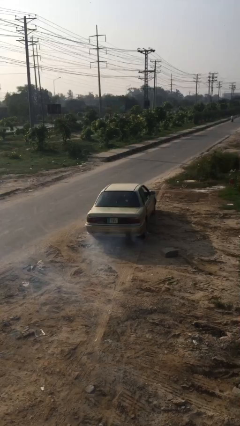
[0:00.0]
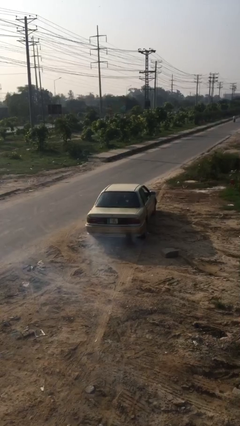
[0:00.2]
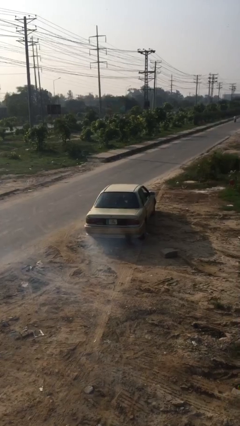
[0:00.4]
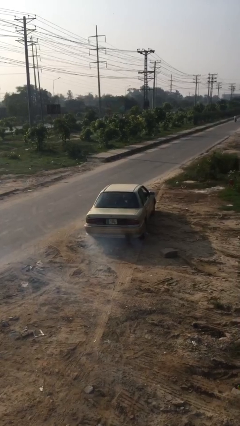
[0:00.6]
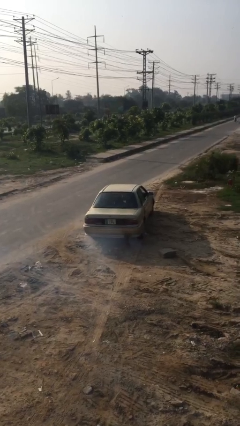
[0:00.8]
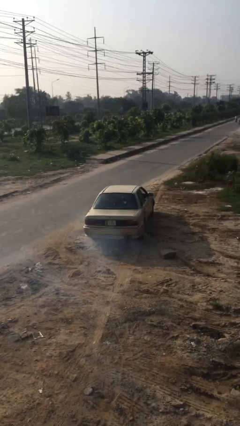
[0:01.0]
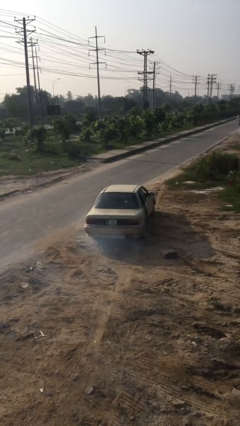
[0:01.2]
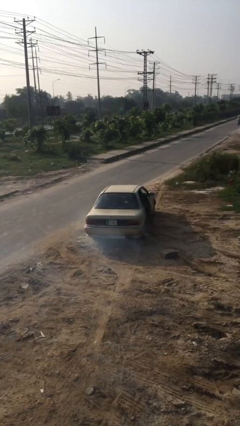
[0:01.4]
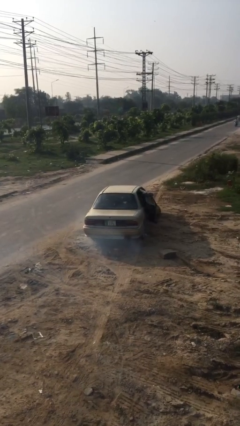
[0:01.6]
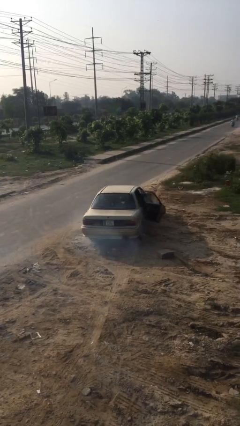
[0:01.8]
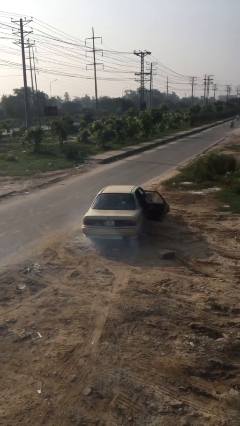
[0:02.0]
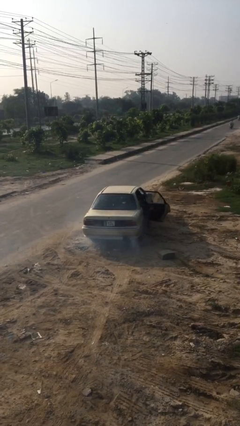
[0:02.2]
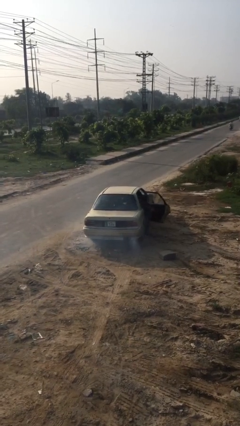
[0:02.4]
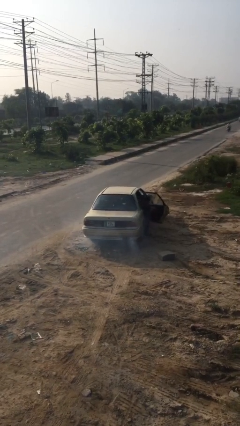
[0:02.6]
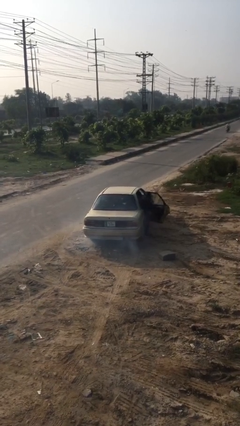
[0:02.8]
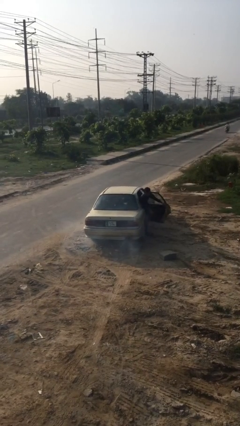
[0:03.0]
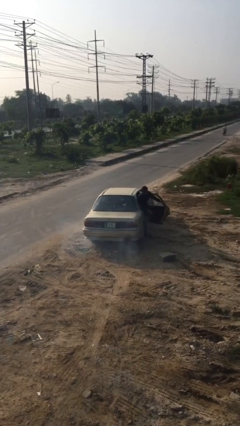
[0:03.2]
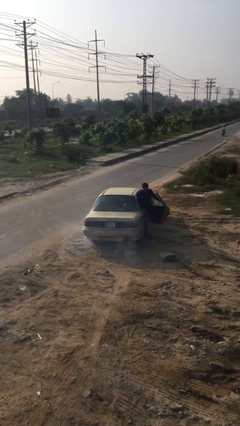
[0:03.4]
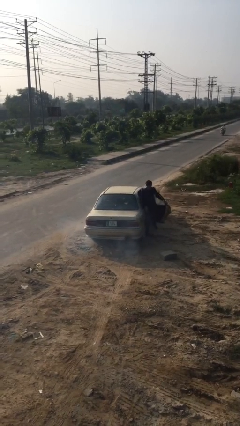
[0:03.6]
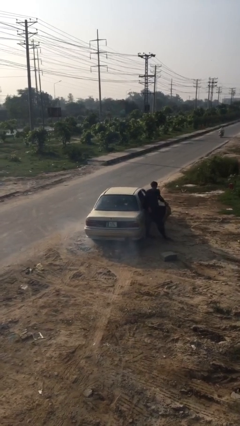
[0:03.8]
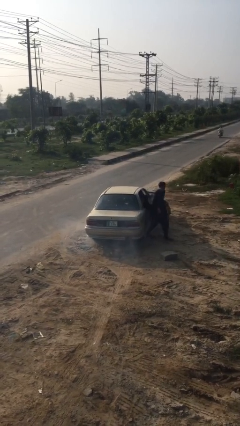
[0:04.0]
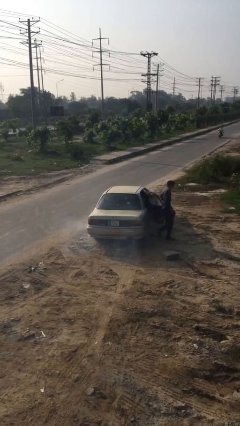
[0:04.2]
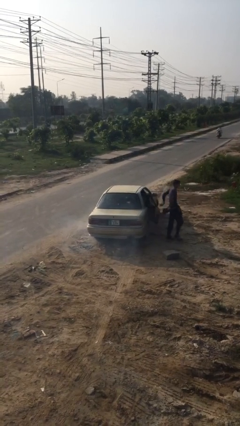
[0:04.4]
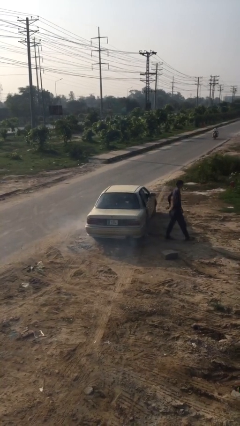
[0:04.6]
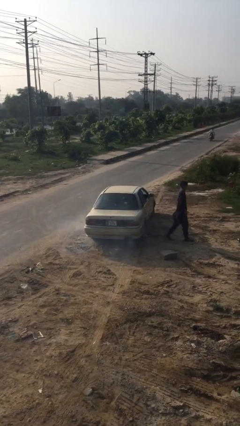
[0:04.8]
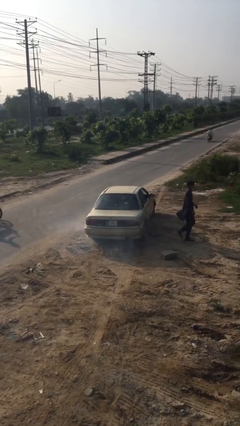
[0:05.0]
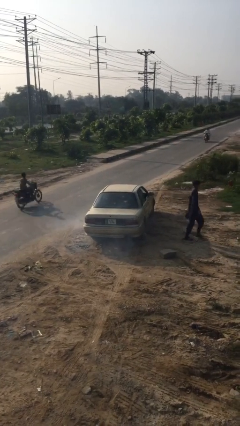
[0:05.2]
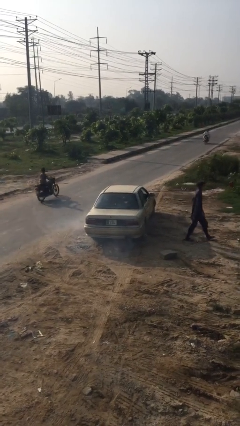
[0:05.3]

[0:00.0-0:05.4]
car drops off person

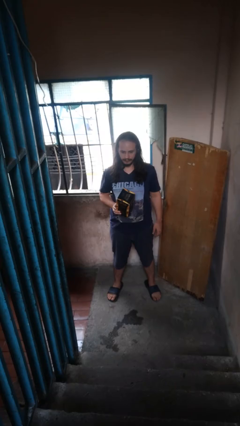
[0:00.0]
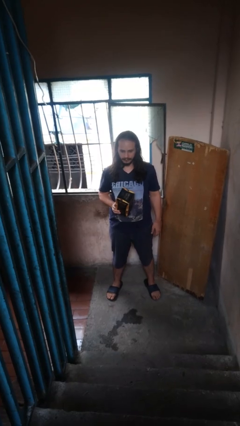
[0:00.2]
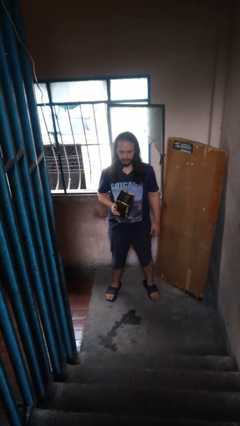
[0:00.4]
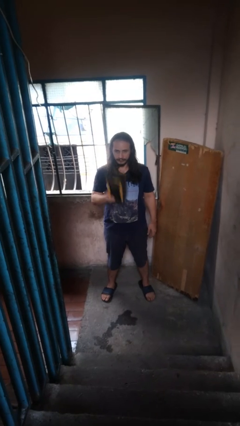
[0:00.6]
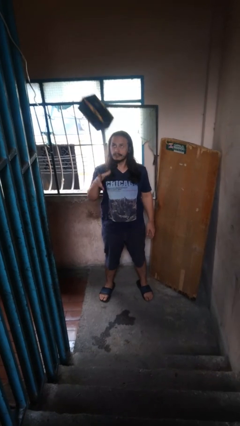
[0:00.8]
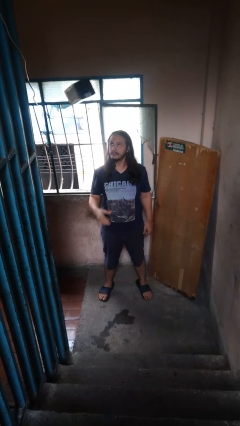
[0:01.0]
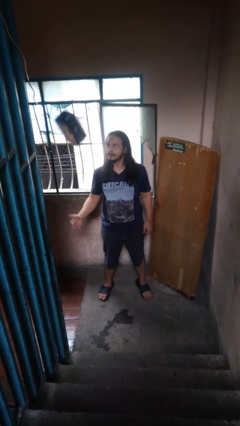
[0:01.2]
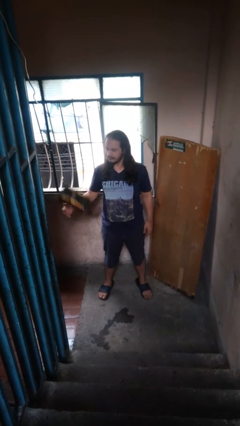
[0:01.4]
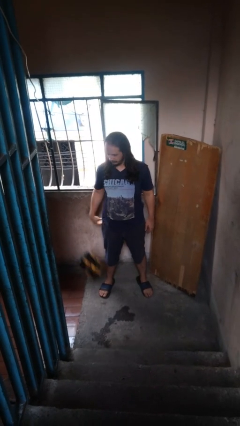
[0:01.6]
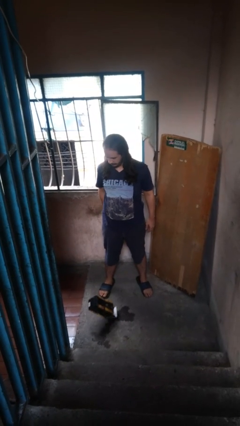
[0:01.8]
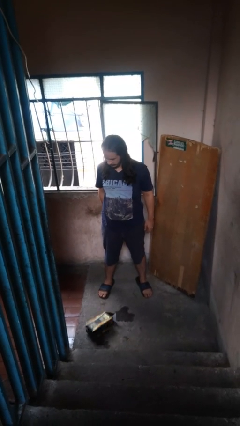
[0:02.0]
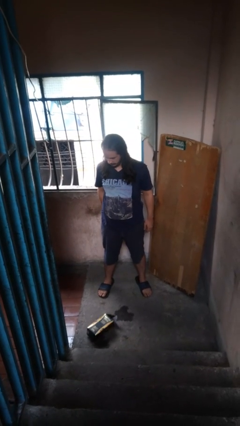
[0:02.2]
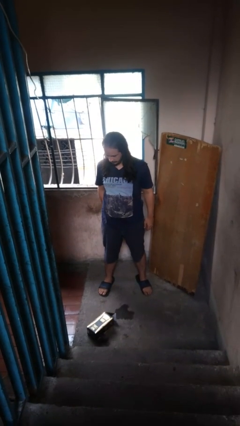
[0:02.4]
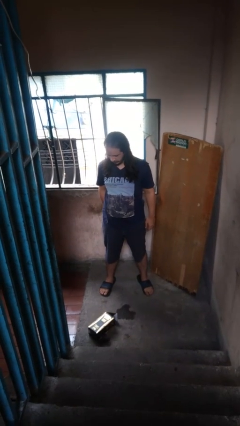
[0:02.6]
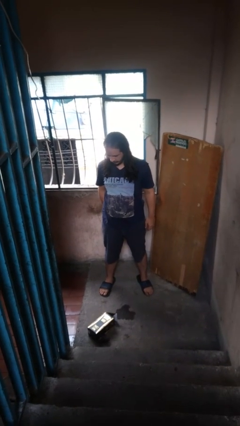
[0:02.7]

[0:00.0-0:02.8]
person throws object into air

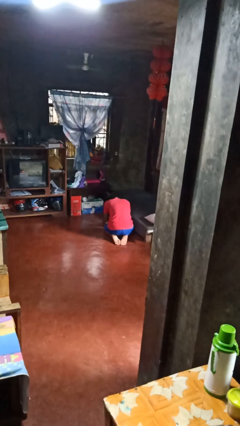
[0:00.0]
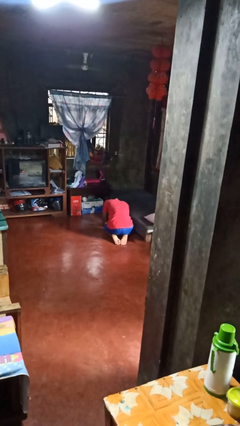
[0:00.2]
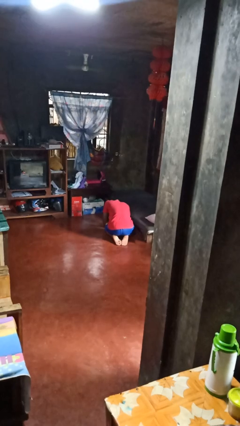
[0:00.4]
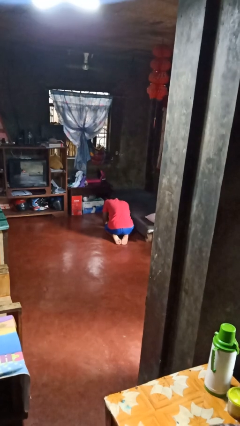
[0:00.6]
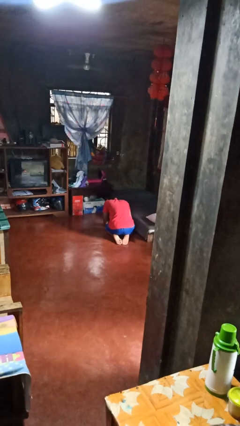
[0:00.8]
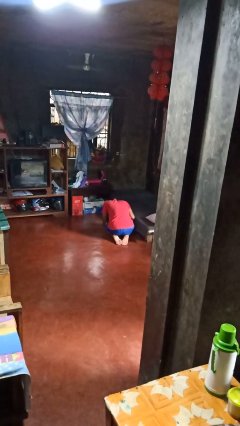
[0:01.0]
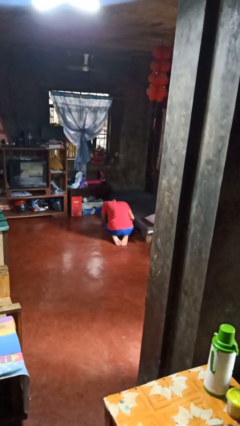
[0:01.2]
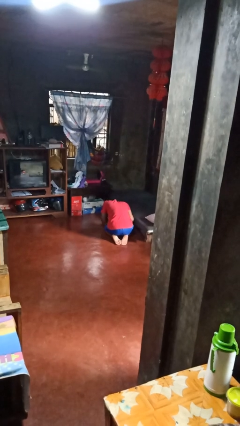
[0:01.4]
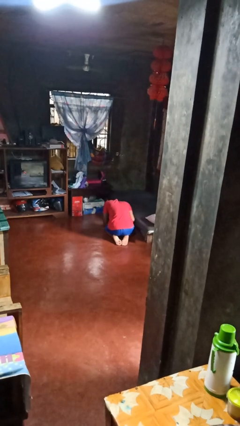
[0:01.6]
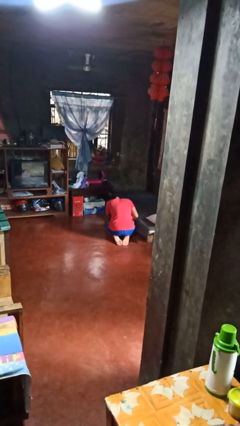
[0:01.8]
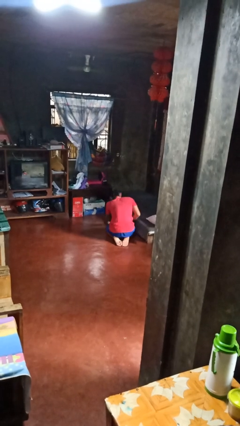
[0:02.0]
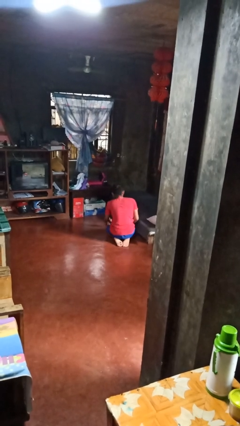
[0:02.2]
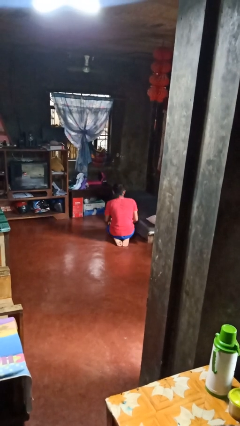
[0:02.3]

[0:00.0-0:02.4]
person searches under bed

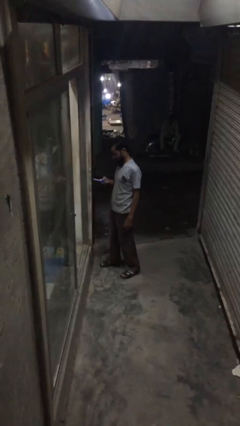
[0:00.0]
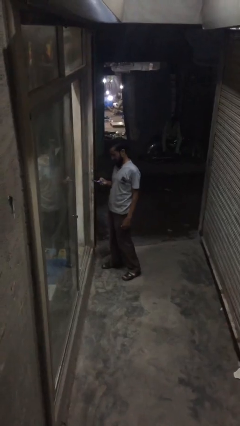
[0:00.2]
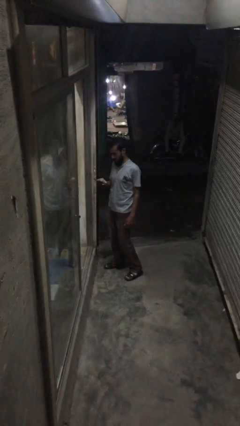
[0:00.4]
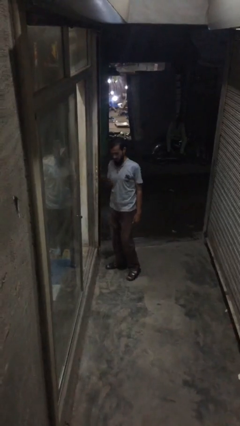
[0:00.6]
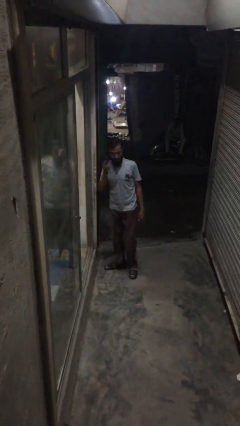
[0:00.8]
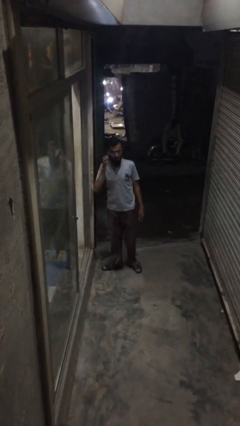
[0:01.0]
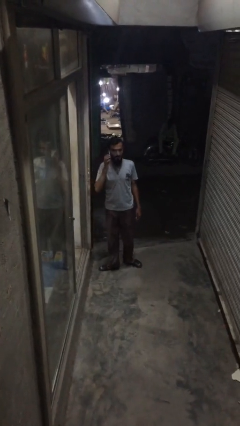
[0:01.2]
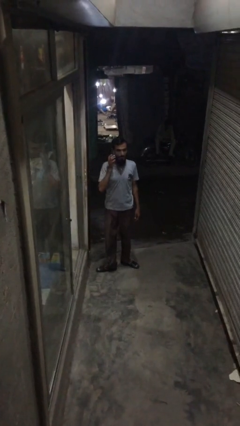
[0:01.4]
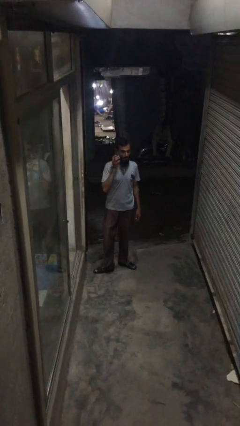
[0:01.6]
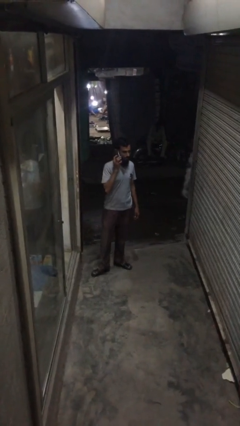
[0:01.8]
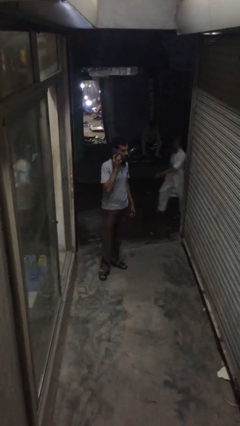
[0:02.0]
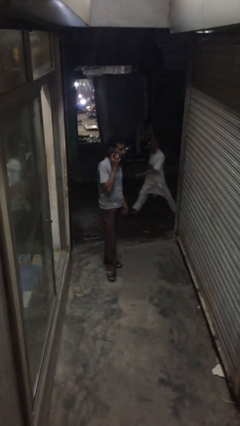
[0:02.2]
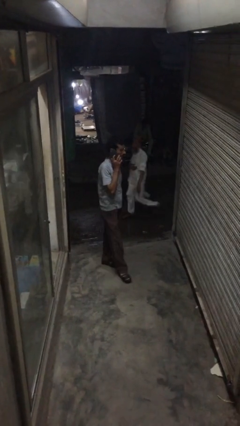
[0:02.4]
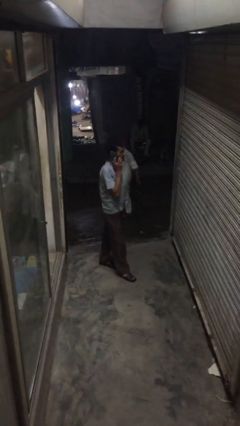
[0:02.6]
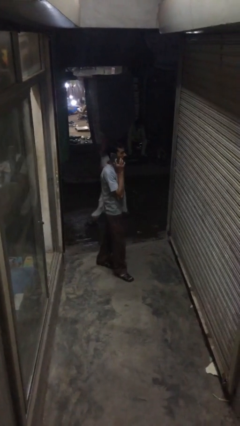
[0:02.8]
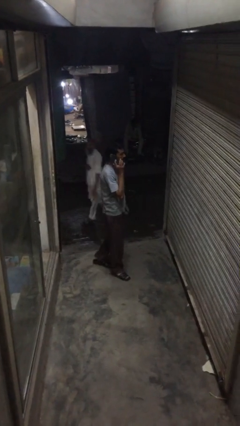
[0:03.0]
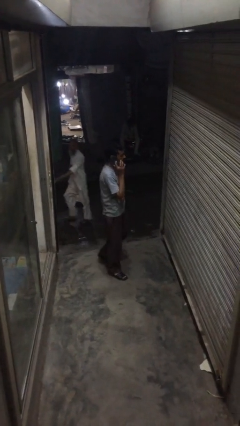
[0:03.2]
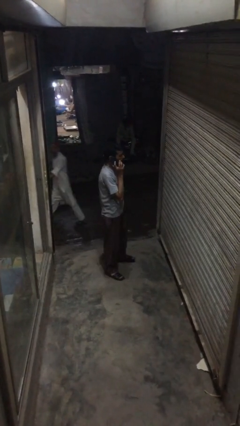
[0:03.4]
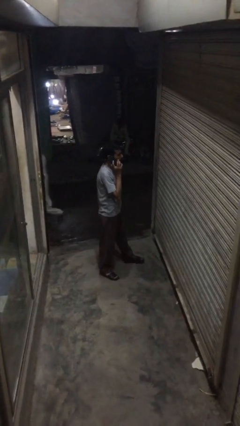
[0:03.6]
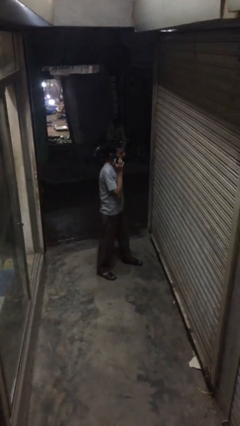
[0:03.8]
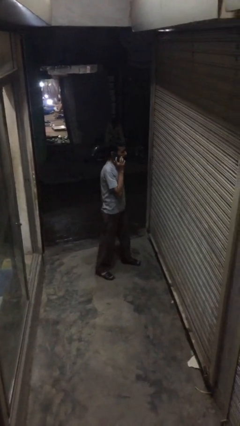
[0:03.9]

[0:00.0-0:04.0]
person talks on phone

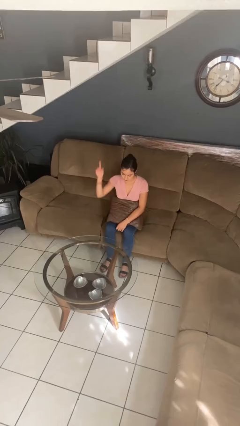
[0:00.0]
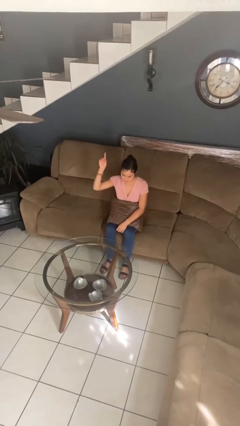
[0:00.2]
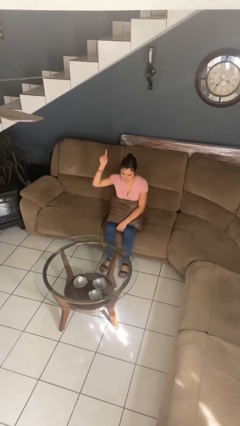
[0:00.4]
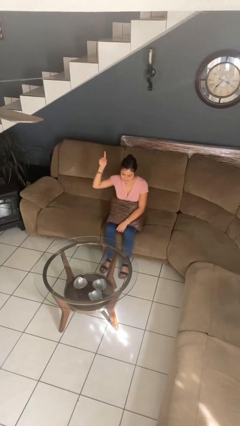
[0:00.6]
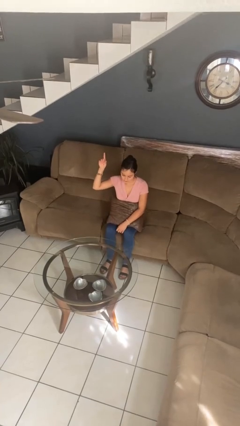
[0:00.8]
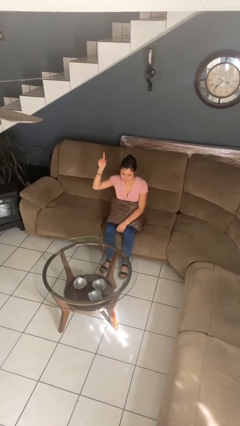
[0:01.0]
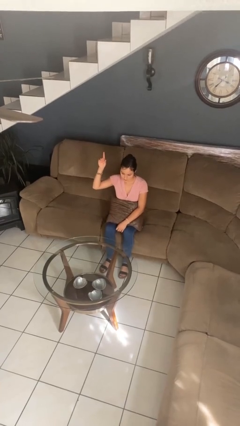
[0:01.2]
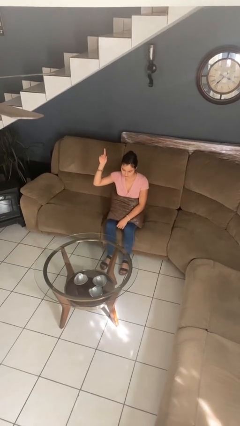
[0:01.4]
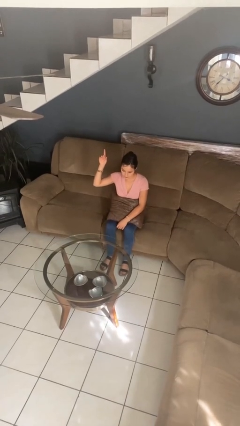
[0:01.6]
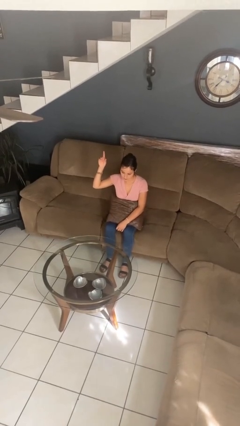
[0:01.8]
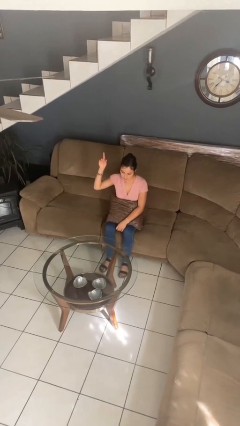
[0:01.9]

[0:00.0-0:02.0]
person gestures number one

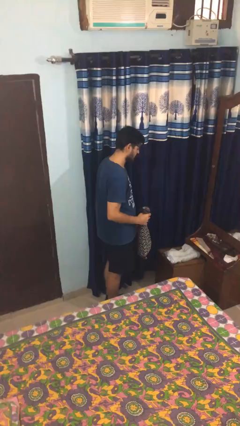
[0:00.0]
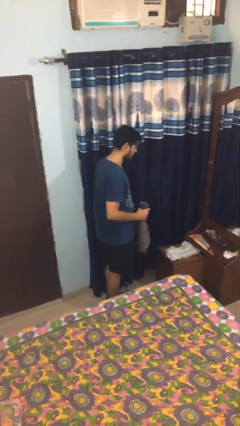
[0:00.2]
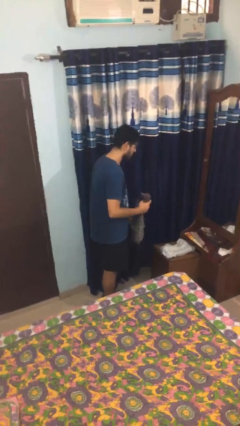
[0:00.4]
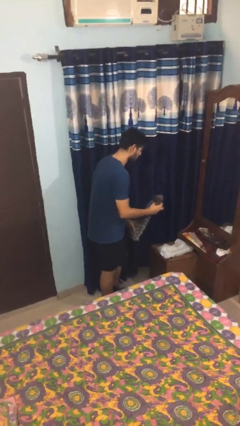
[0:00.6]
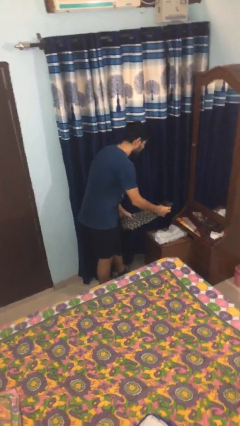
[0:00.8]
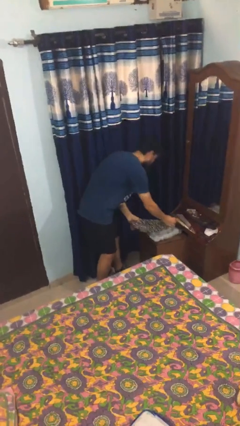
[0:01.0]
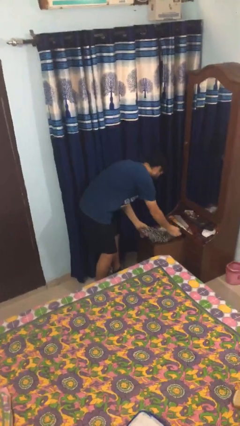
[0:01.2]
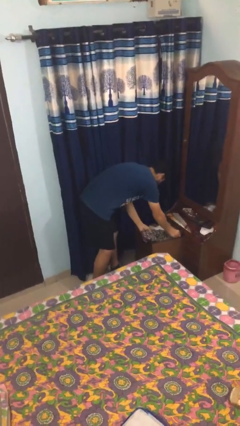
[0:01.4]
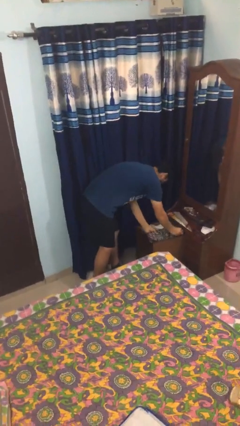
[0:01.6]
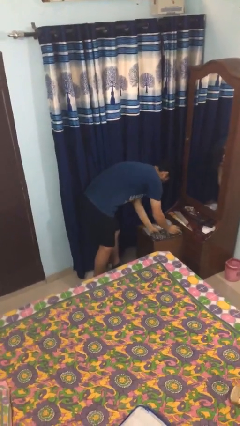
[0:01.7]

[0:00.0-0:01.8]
person puts clothes into dresser
